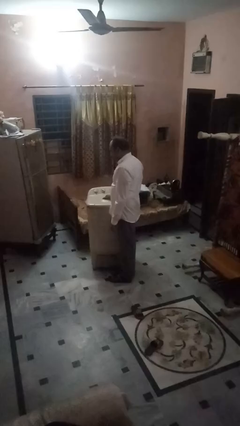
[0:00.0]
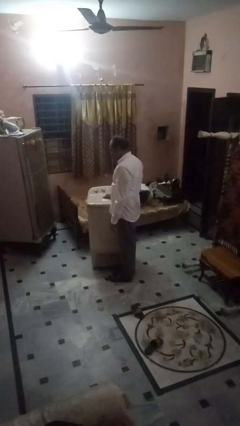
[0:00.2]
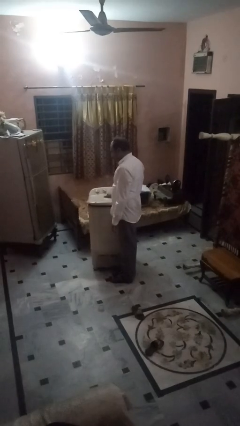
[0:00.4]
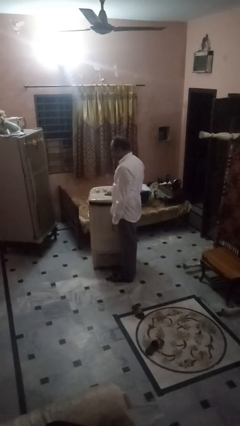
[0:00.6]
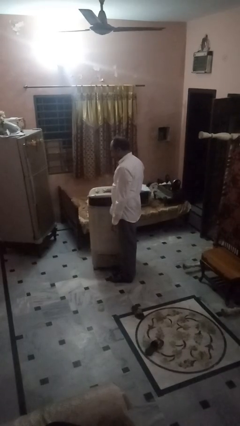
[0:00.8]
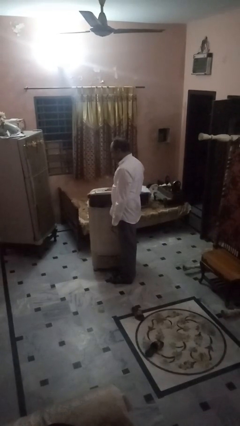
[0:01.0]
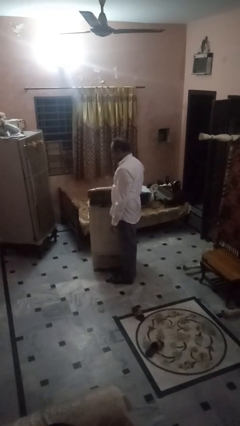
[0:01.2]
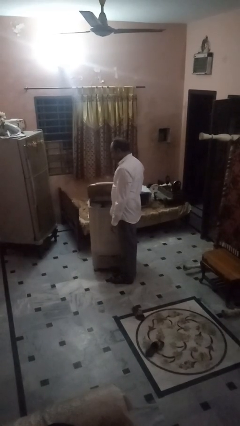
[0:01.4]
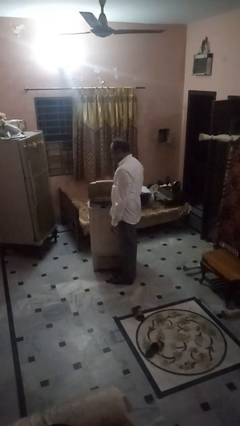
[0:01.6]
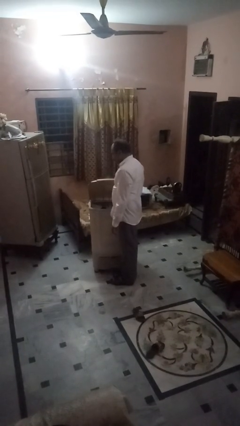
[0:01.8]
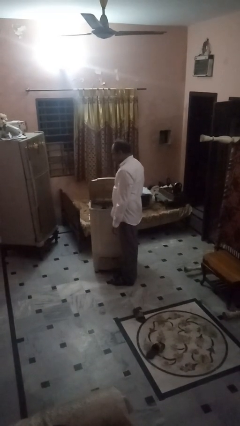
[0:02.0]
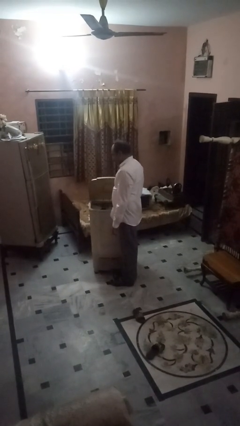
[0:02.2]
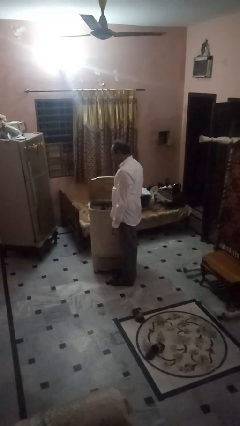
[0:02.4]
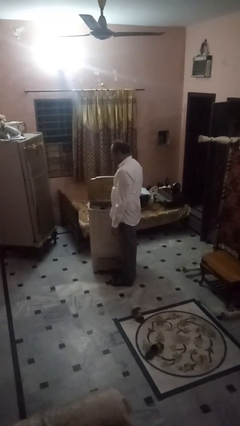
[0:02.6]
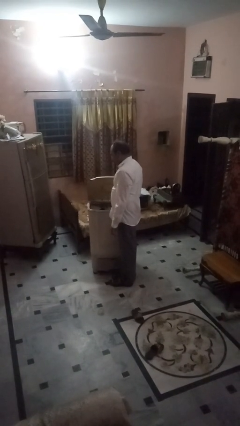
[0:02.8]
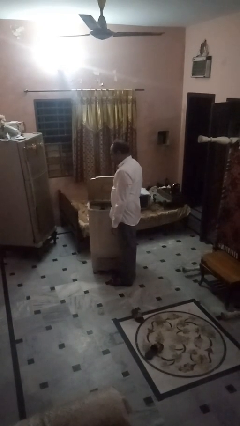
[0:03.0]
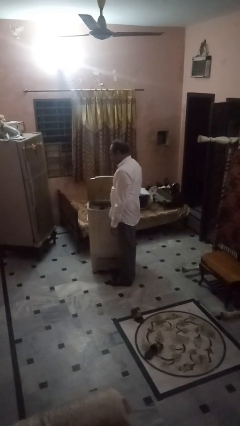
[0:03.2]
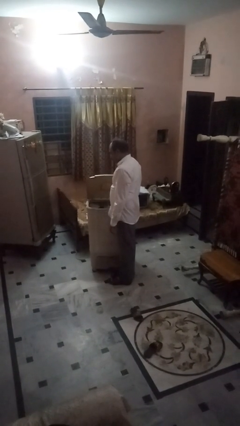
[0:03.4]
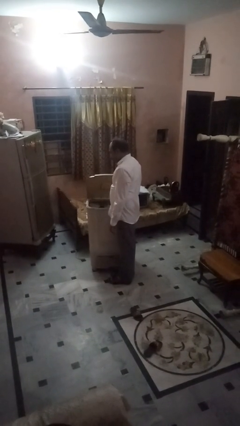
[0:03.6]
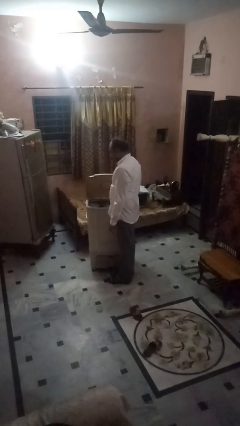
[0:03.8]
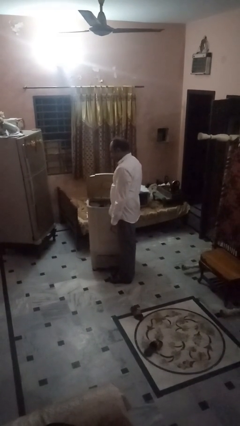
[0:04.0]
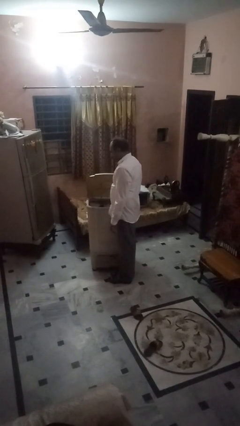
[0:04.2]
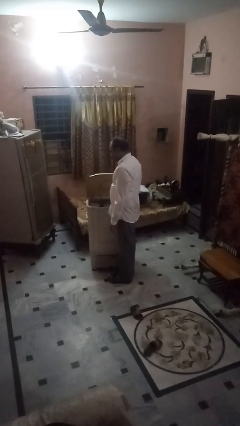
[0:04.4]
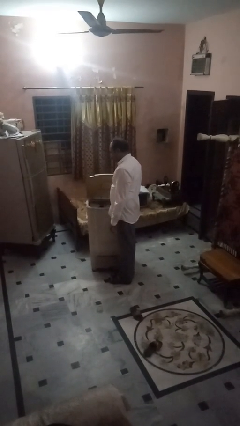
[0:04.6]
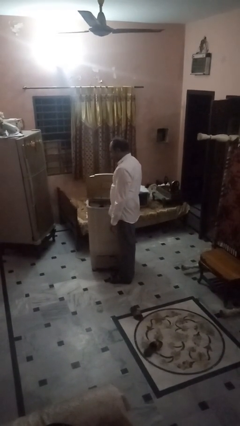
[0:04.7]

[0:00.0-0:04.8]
person opens clothes washer

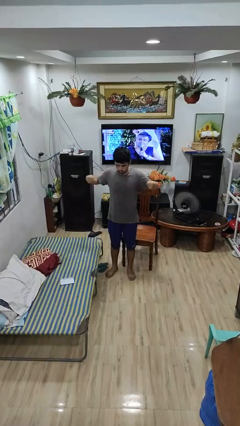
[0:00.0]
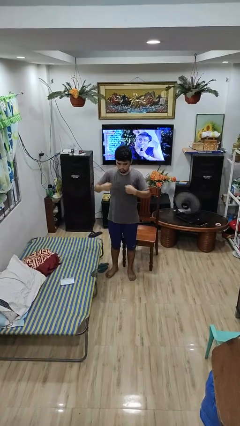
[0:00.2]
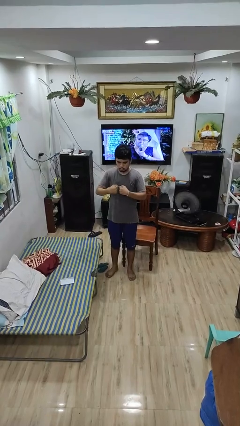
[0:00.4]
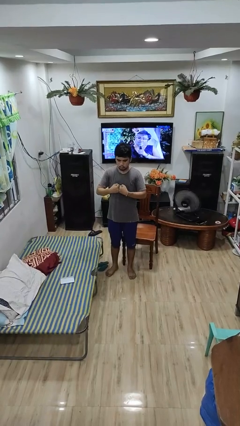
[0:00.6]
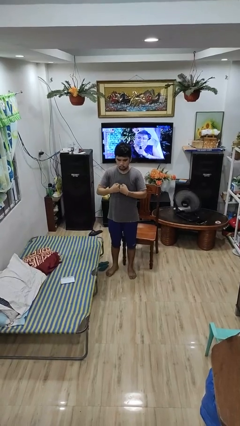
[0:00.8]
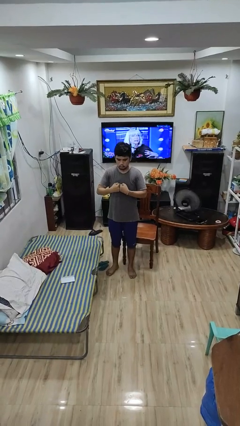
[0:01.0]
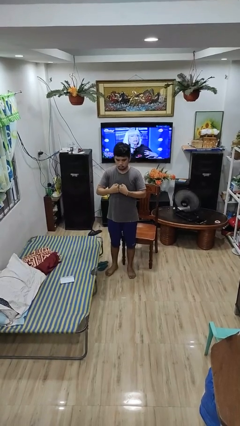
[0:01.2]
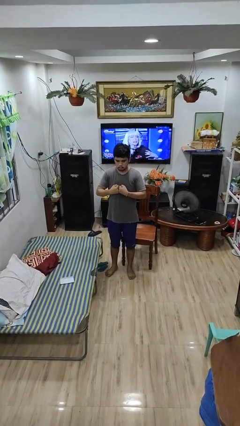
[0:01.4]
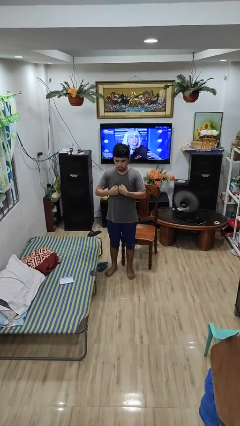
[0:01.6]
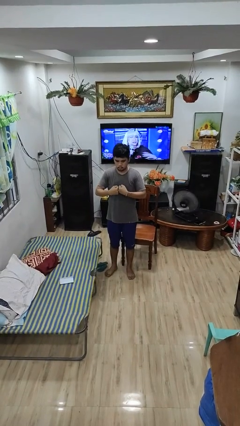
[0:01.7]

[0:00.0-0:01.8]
person gestures zoom out

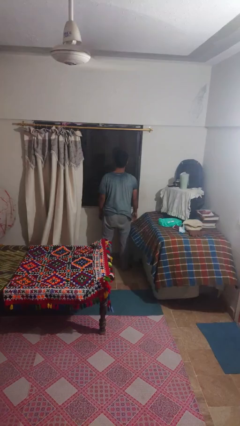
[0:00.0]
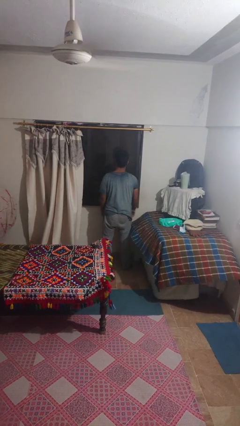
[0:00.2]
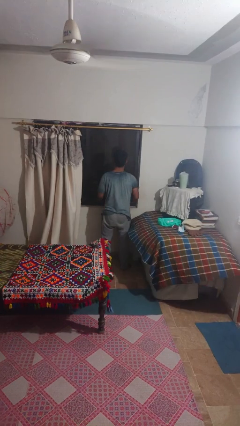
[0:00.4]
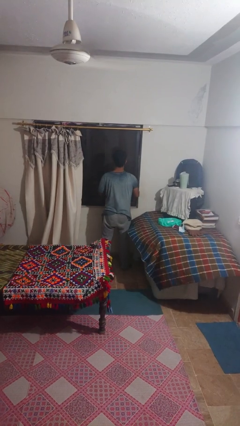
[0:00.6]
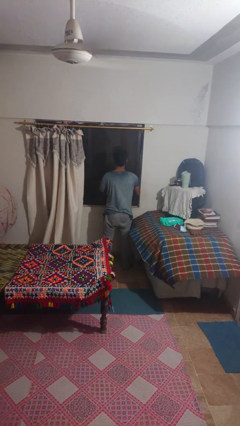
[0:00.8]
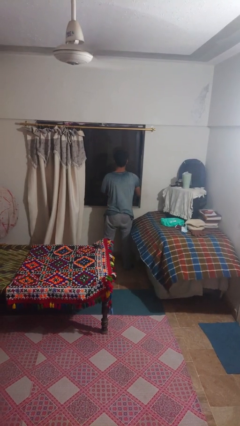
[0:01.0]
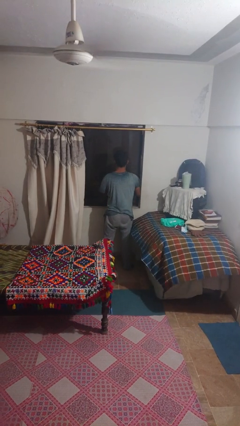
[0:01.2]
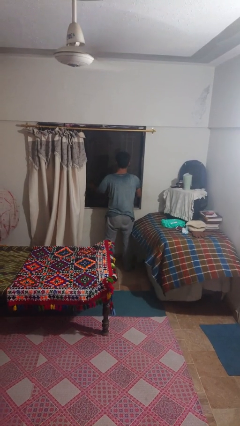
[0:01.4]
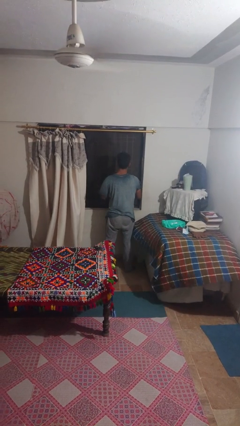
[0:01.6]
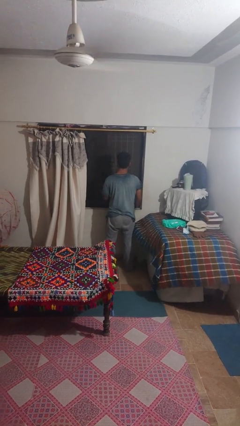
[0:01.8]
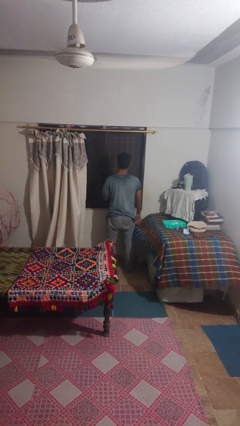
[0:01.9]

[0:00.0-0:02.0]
person opens sliding door

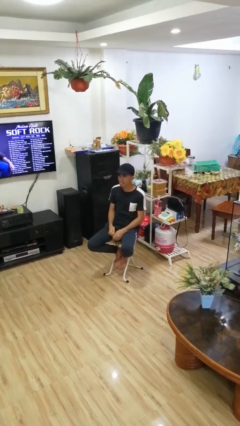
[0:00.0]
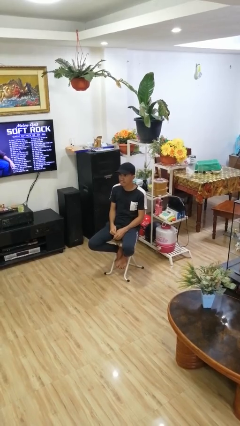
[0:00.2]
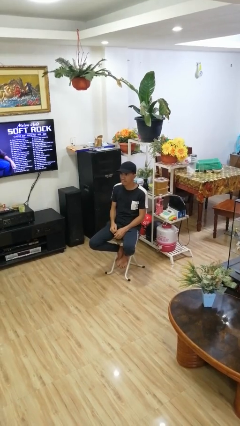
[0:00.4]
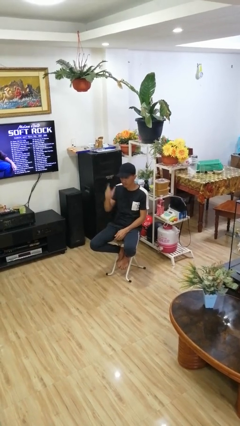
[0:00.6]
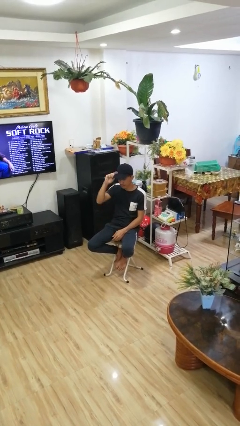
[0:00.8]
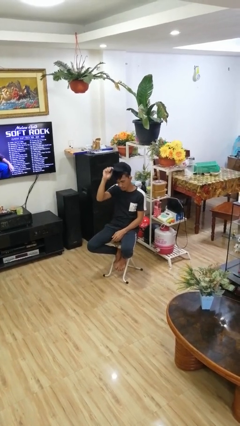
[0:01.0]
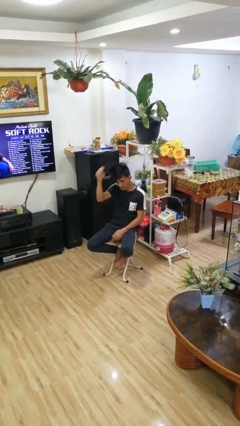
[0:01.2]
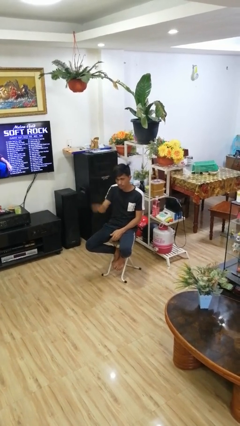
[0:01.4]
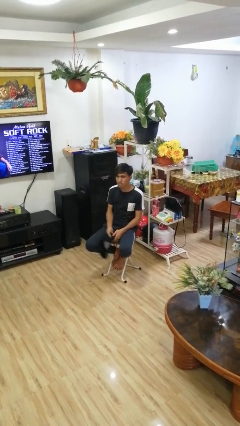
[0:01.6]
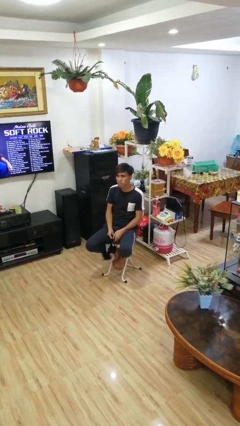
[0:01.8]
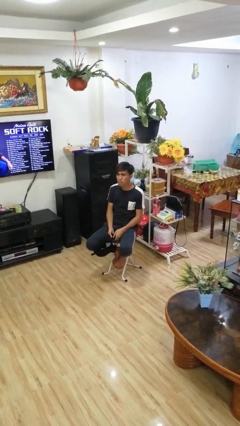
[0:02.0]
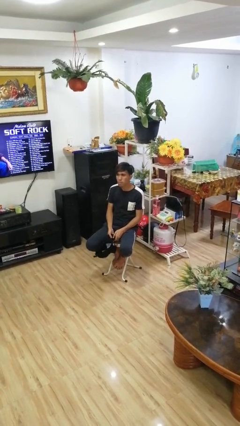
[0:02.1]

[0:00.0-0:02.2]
person takes off hat

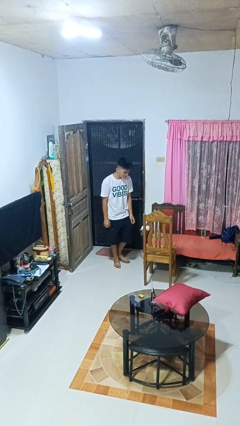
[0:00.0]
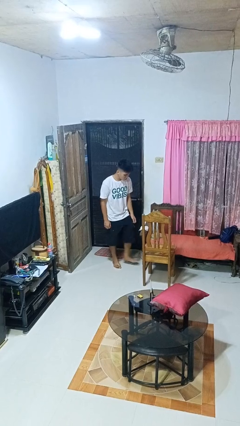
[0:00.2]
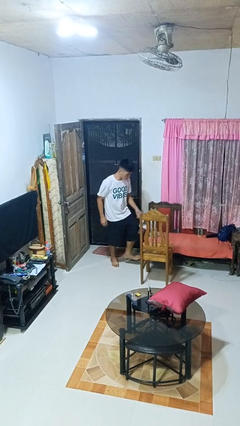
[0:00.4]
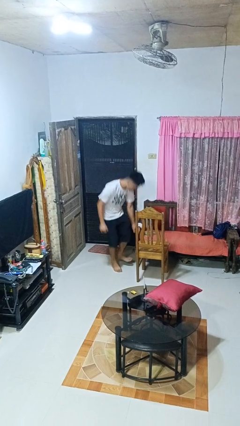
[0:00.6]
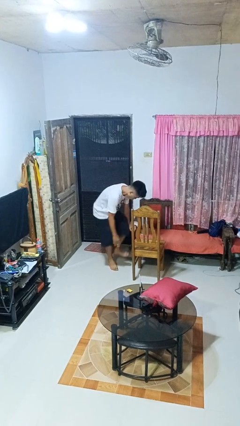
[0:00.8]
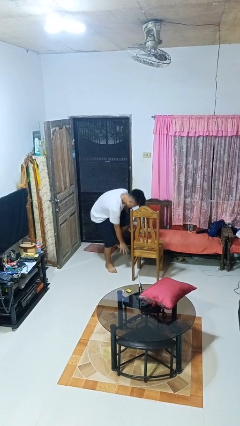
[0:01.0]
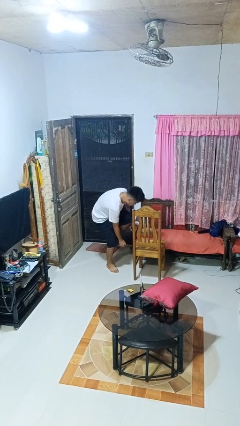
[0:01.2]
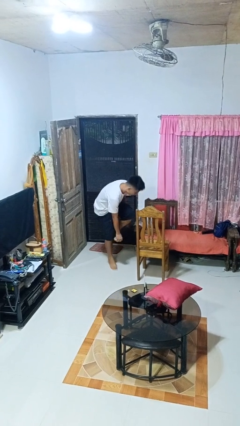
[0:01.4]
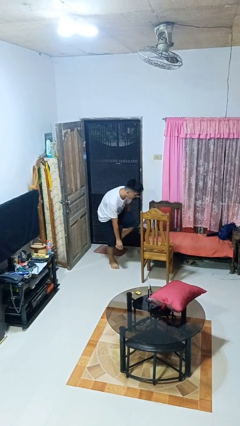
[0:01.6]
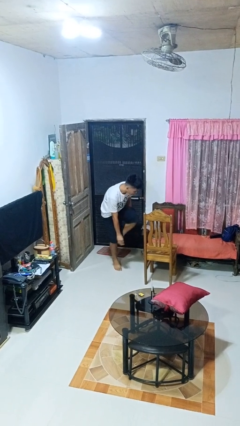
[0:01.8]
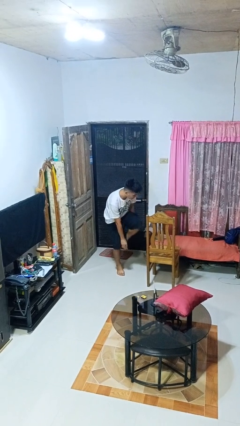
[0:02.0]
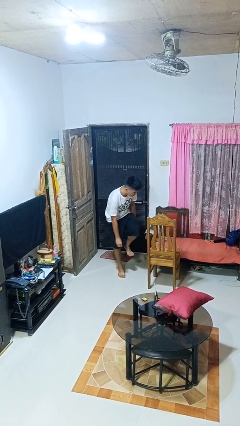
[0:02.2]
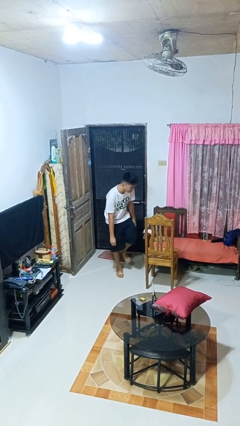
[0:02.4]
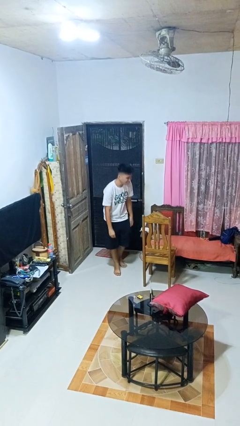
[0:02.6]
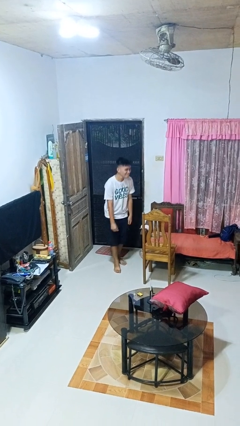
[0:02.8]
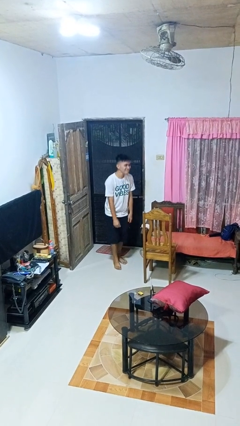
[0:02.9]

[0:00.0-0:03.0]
person stubs toe

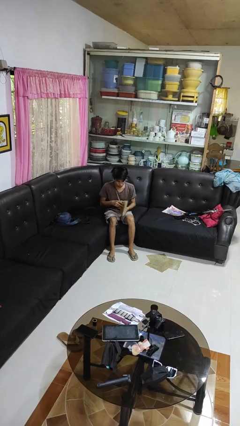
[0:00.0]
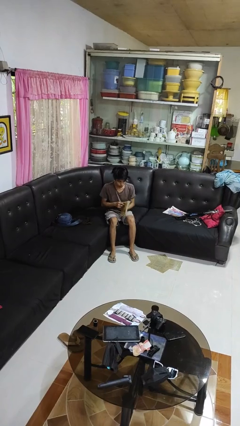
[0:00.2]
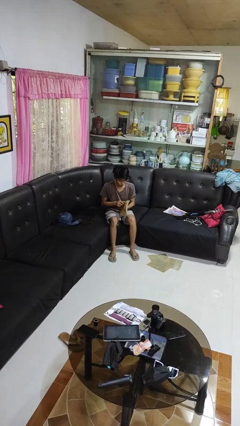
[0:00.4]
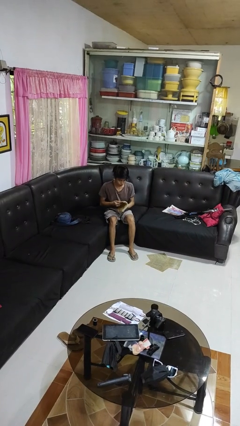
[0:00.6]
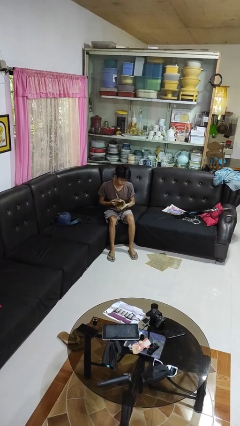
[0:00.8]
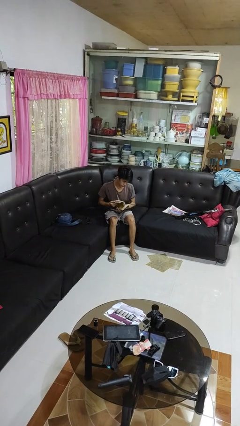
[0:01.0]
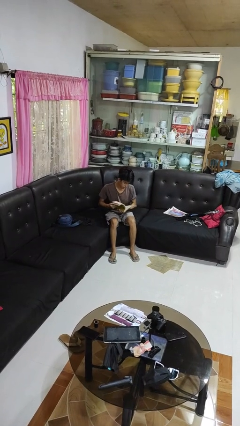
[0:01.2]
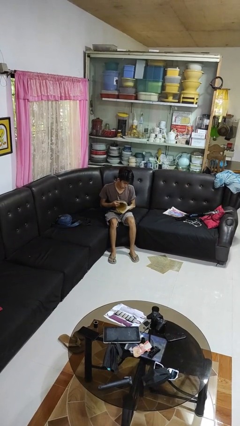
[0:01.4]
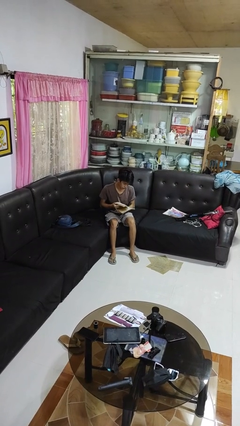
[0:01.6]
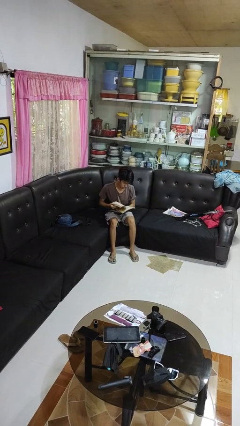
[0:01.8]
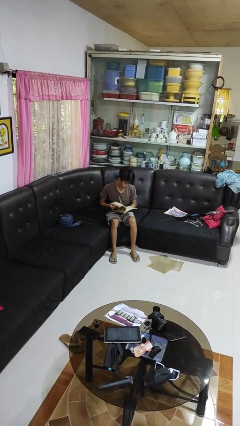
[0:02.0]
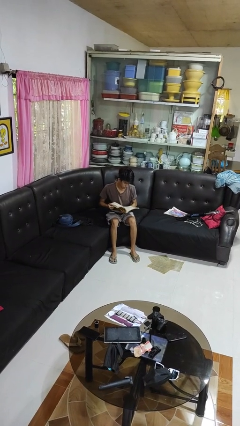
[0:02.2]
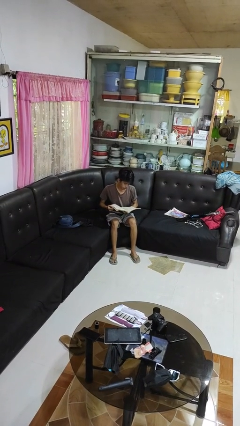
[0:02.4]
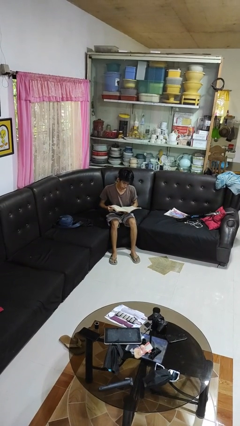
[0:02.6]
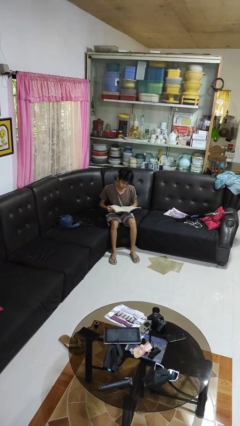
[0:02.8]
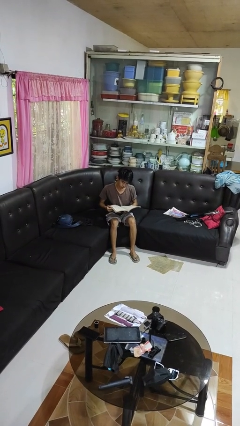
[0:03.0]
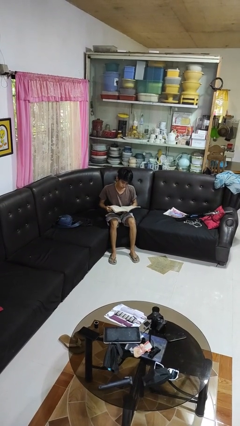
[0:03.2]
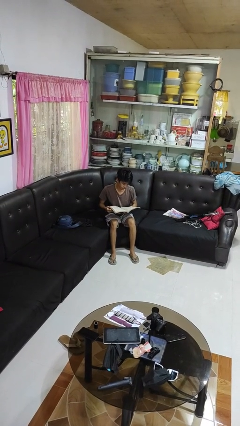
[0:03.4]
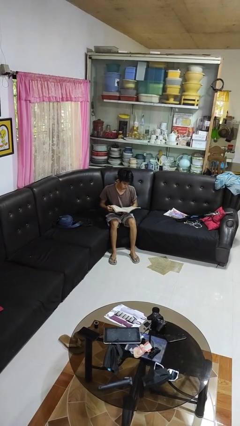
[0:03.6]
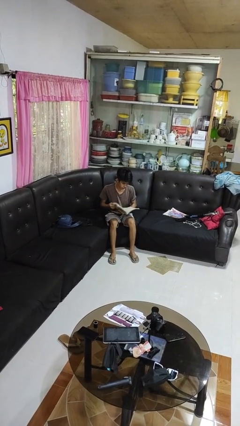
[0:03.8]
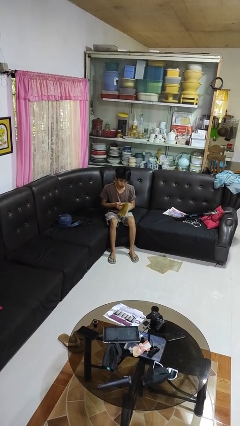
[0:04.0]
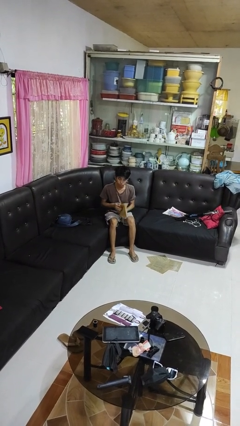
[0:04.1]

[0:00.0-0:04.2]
person reads book
